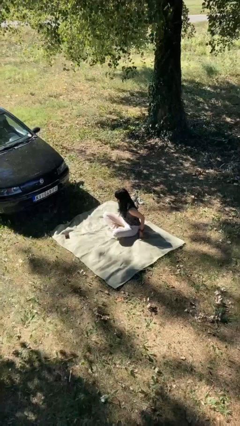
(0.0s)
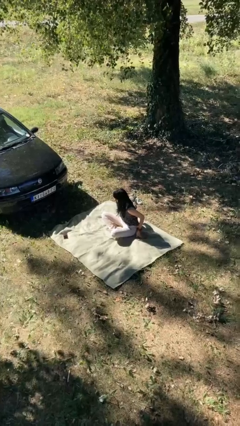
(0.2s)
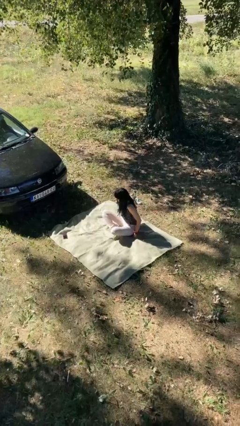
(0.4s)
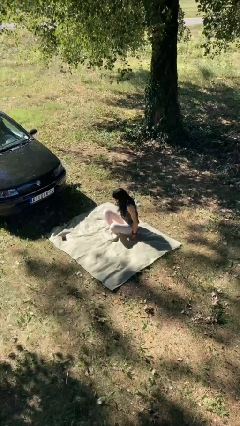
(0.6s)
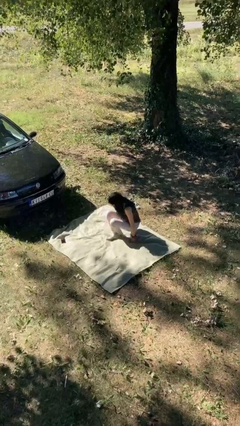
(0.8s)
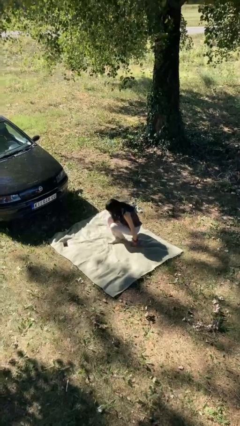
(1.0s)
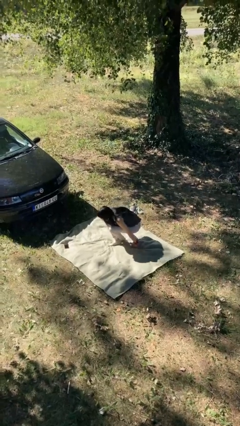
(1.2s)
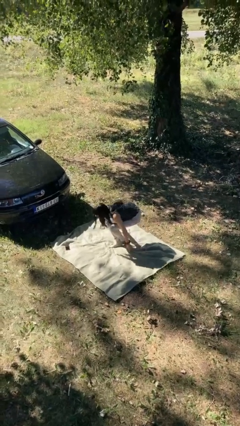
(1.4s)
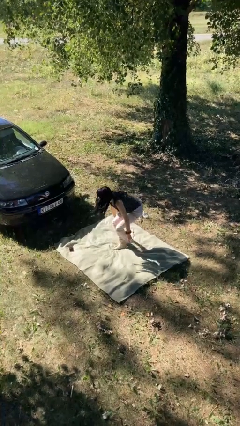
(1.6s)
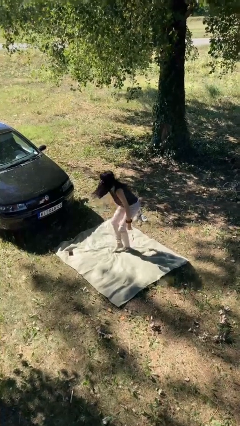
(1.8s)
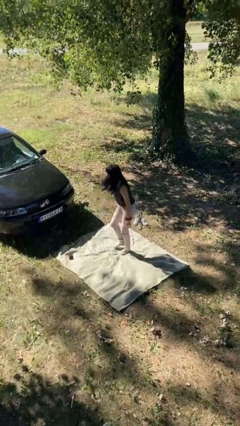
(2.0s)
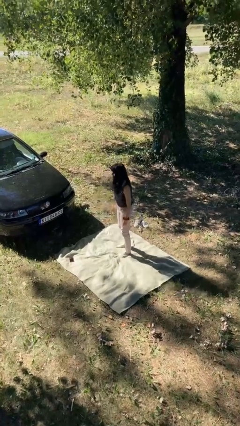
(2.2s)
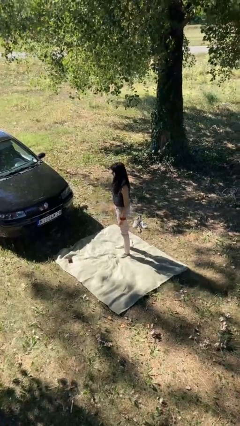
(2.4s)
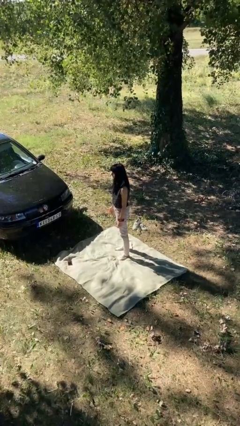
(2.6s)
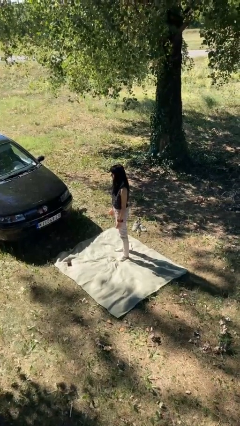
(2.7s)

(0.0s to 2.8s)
person stands up from floor

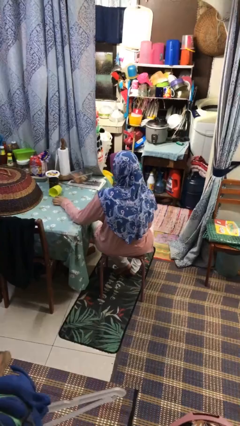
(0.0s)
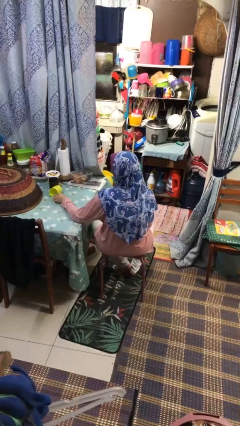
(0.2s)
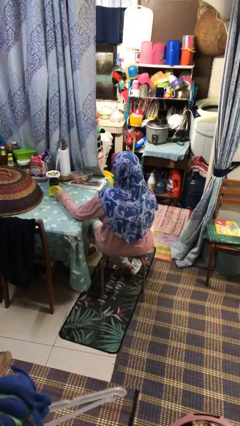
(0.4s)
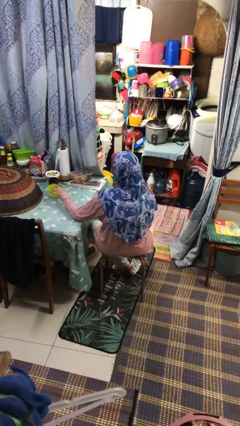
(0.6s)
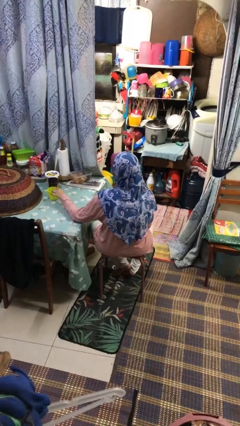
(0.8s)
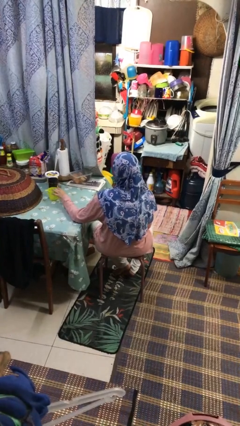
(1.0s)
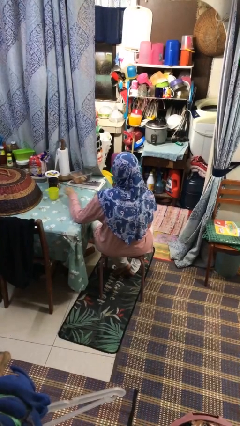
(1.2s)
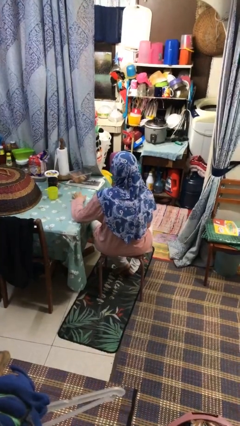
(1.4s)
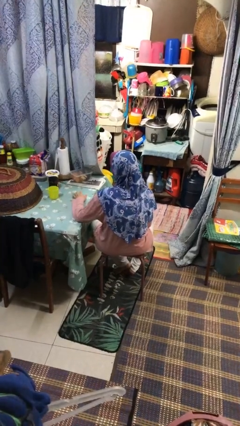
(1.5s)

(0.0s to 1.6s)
person sets upright glass

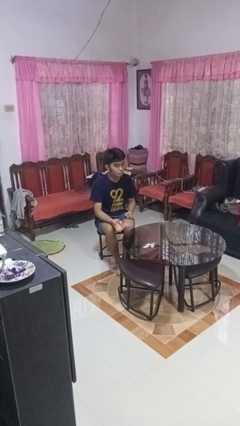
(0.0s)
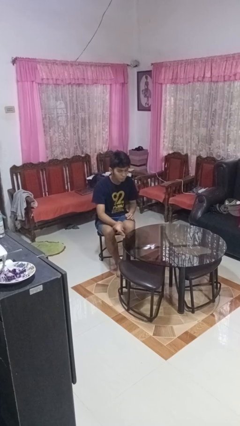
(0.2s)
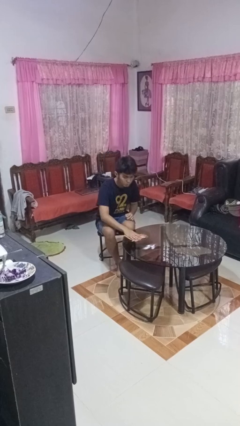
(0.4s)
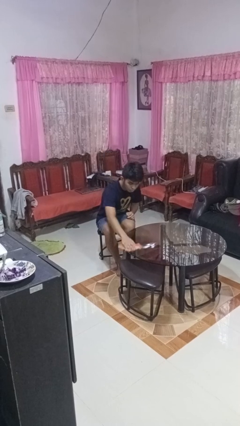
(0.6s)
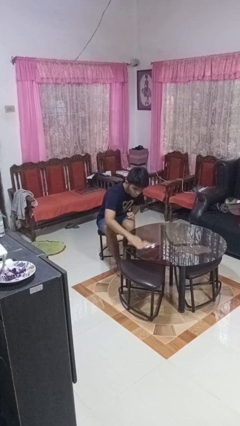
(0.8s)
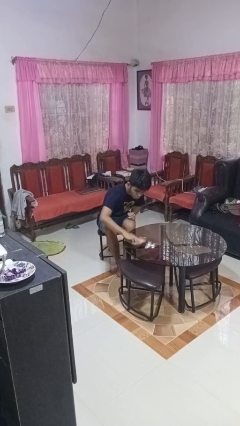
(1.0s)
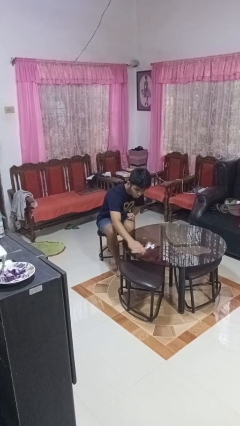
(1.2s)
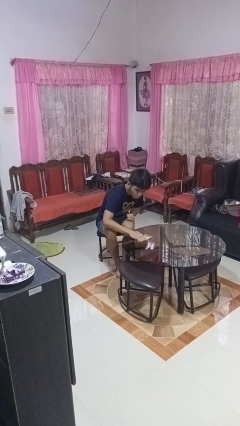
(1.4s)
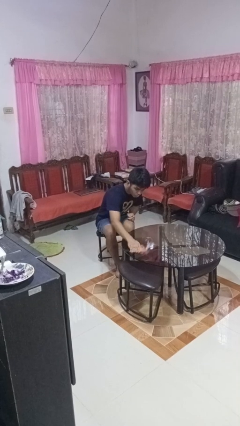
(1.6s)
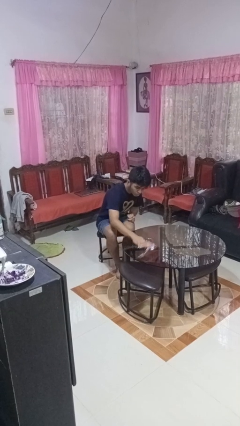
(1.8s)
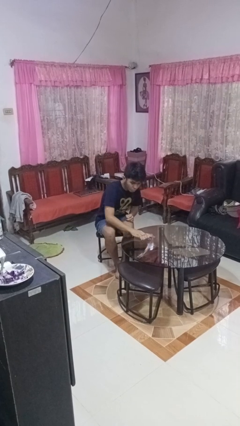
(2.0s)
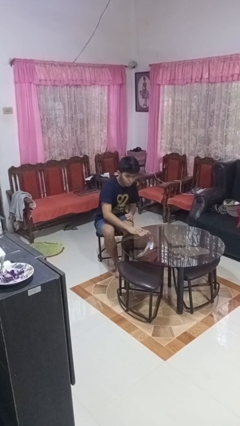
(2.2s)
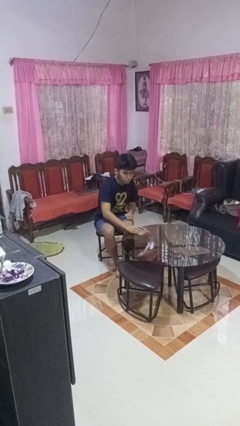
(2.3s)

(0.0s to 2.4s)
person cleans table with rag

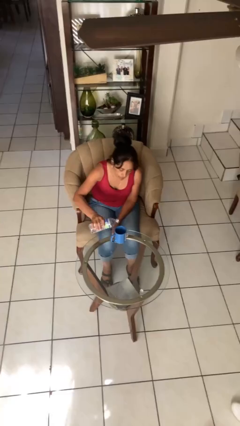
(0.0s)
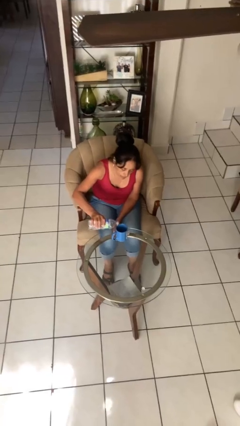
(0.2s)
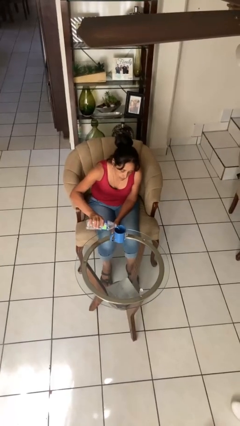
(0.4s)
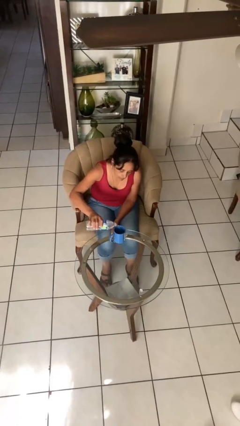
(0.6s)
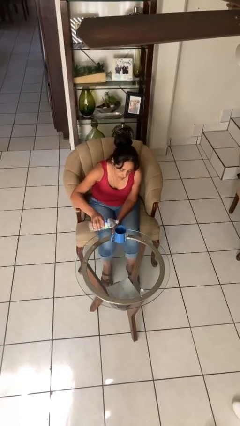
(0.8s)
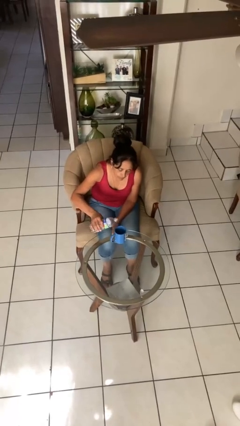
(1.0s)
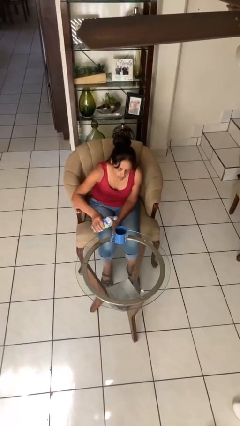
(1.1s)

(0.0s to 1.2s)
person pours liquid into cup

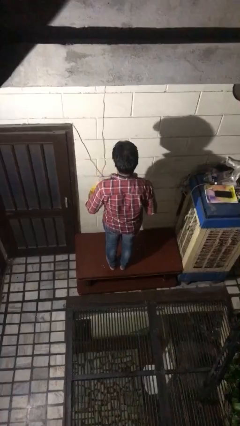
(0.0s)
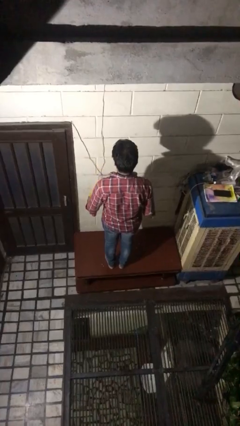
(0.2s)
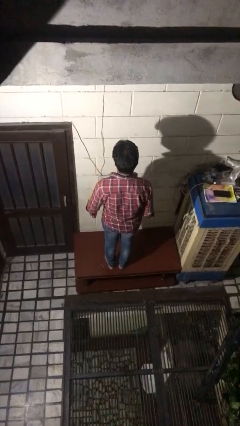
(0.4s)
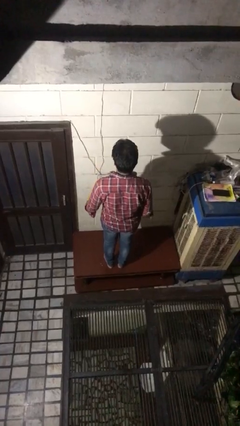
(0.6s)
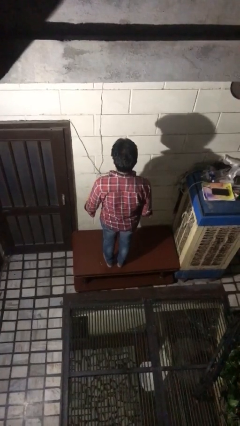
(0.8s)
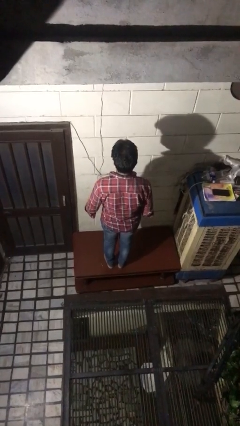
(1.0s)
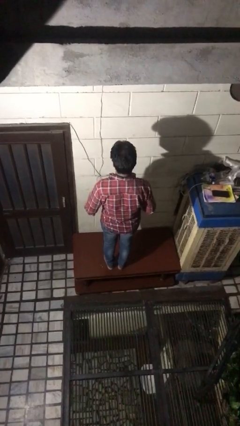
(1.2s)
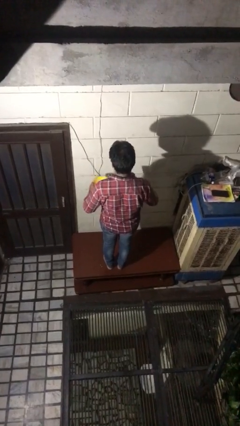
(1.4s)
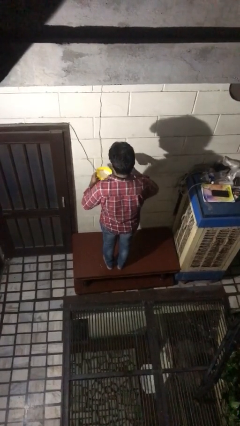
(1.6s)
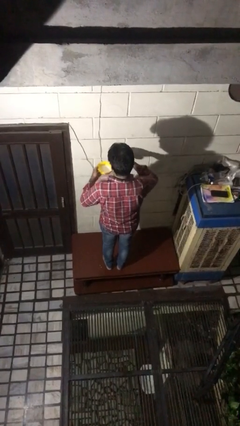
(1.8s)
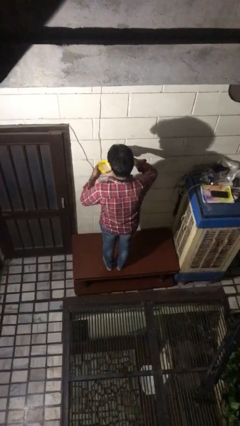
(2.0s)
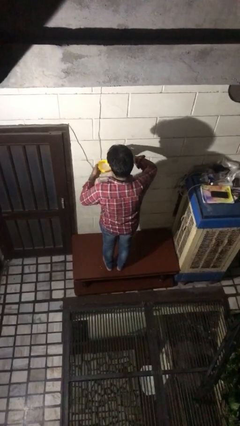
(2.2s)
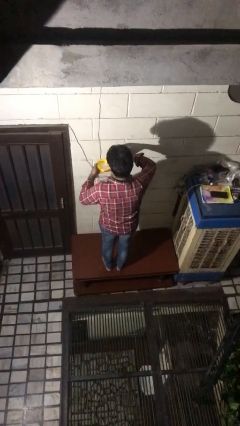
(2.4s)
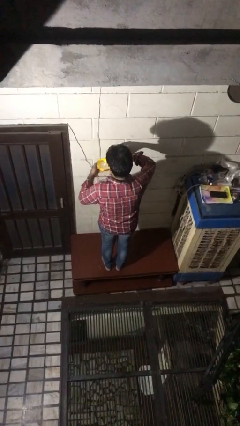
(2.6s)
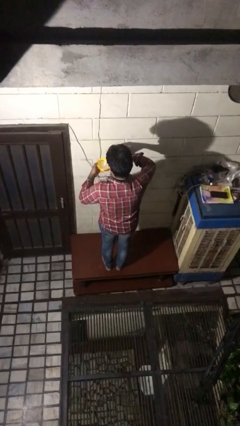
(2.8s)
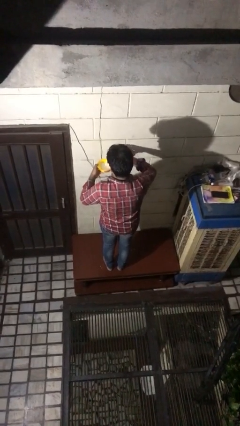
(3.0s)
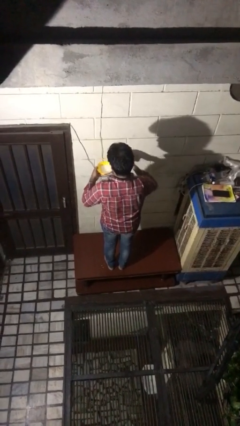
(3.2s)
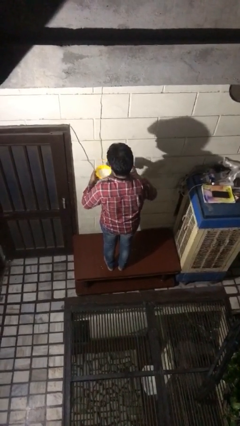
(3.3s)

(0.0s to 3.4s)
person pours into bowl

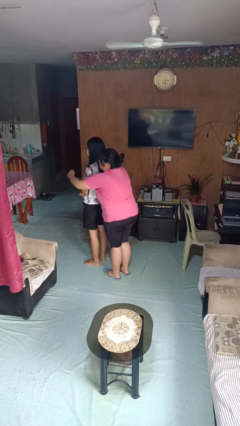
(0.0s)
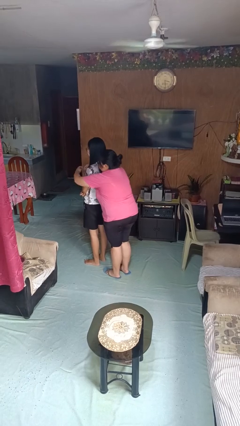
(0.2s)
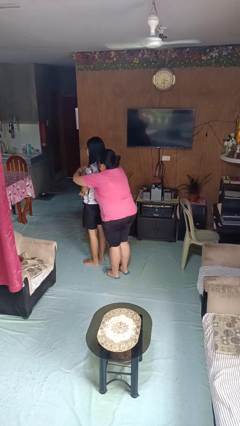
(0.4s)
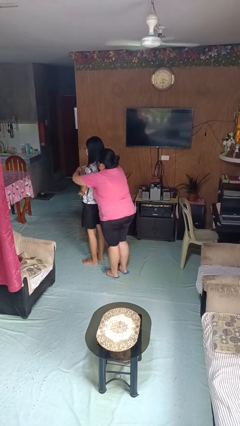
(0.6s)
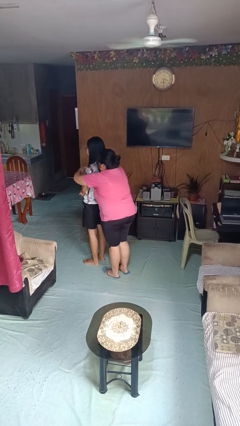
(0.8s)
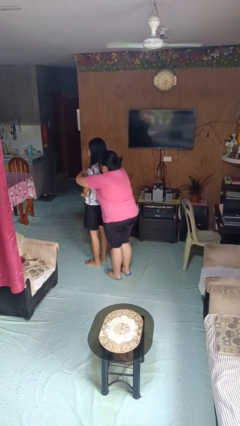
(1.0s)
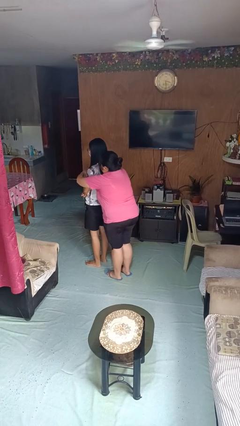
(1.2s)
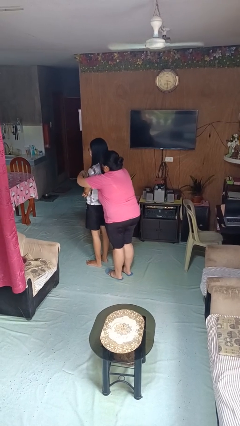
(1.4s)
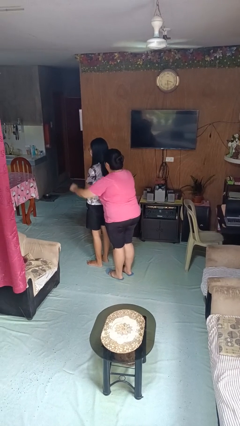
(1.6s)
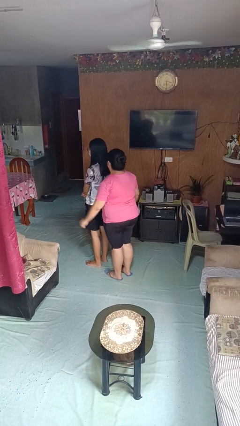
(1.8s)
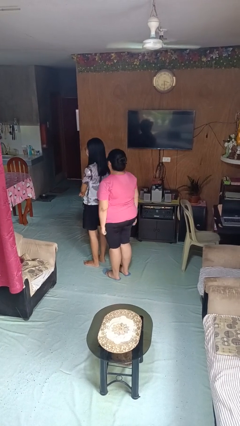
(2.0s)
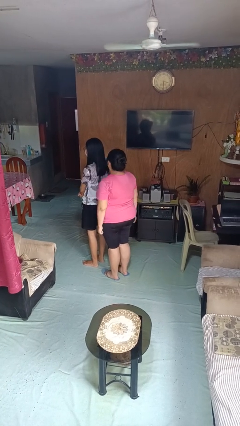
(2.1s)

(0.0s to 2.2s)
person hugs person from behind

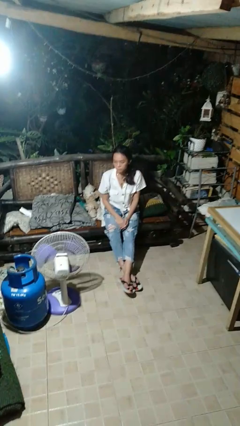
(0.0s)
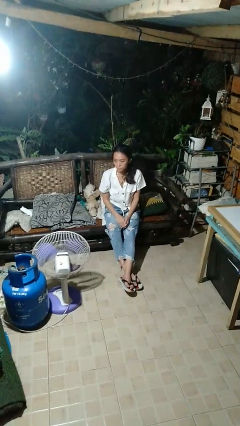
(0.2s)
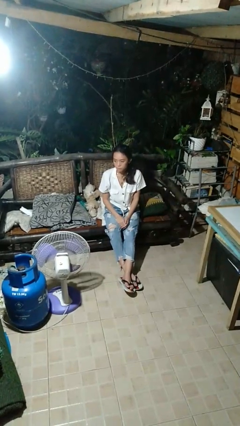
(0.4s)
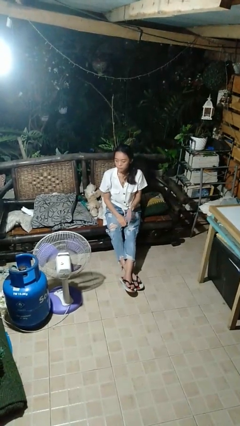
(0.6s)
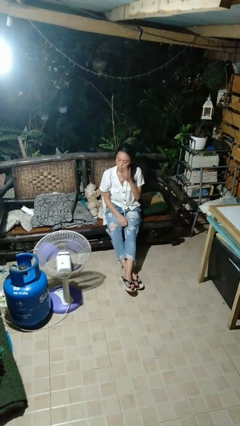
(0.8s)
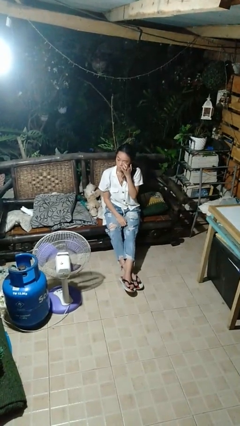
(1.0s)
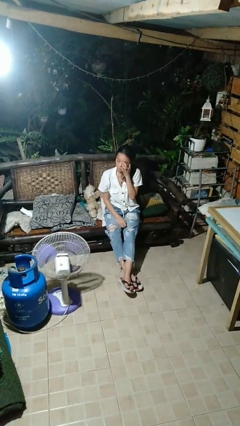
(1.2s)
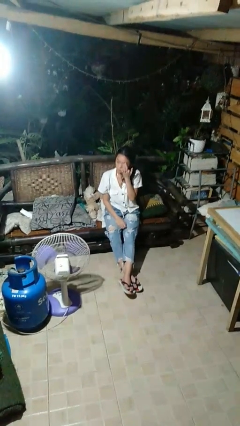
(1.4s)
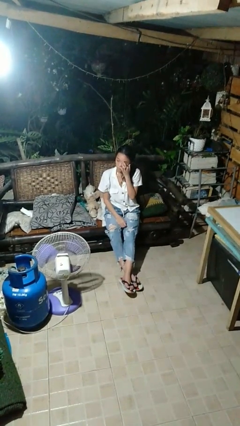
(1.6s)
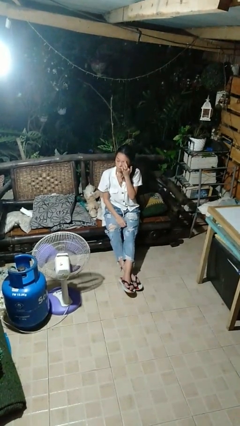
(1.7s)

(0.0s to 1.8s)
person rubs eyes

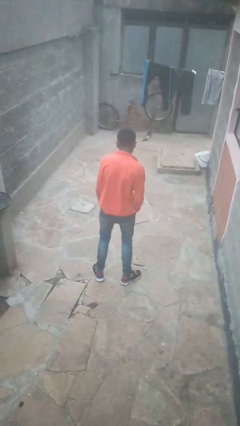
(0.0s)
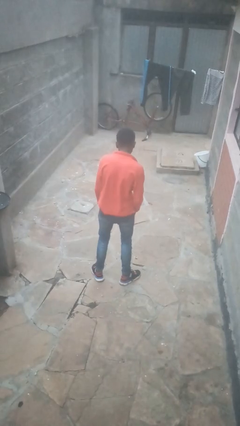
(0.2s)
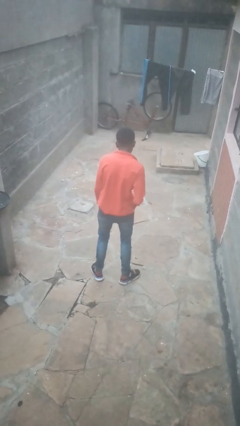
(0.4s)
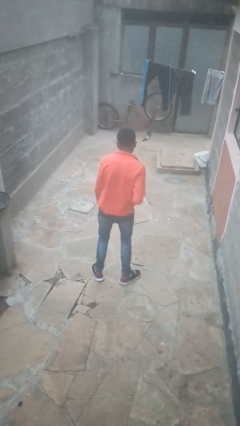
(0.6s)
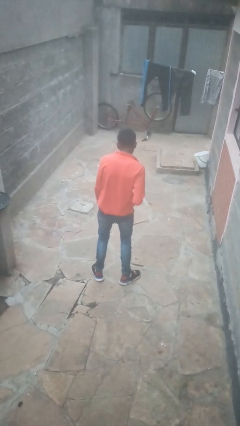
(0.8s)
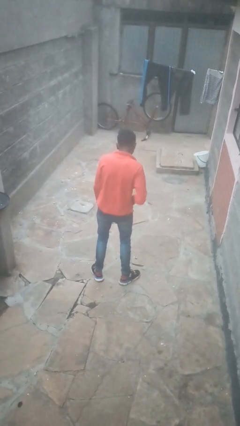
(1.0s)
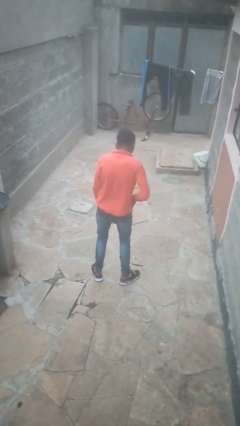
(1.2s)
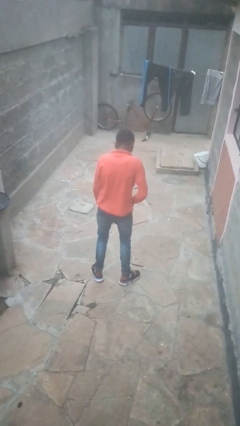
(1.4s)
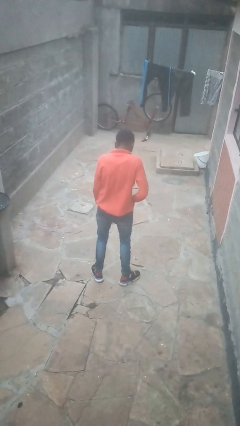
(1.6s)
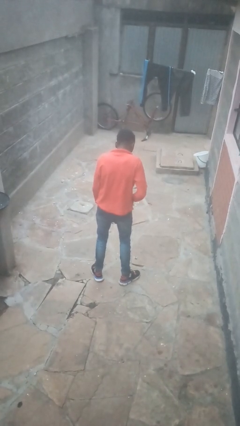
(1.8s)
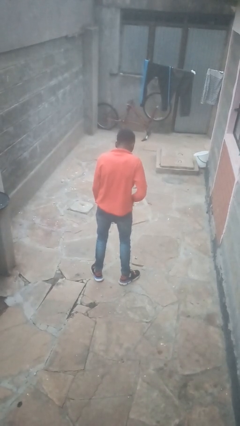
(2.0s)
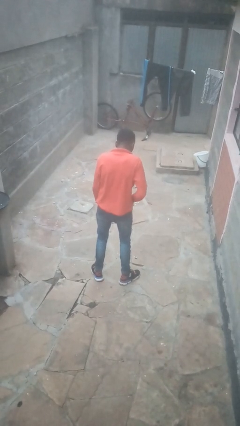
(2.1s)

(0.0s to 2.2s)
person puts hands in back pockets
